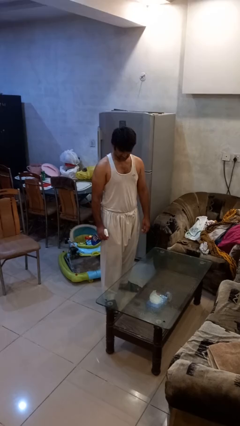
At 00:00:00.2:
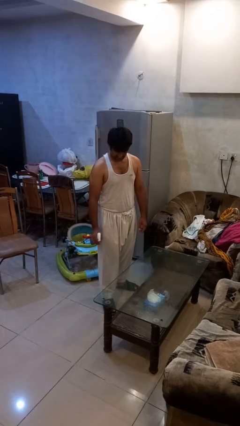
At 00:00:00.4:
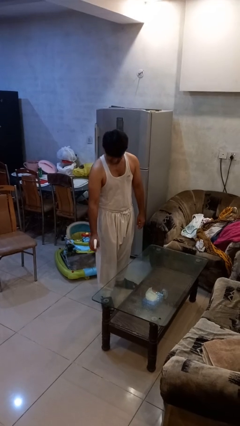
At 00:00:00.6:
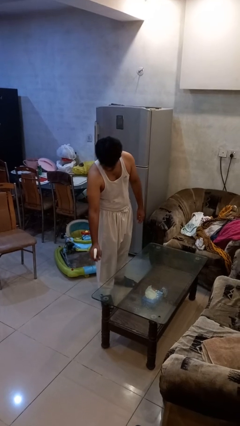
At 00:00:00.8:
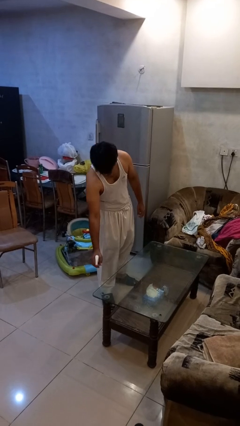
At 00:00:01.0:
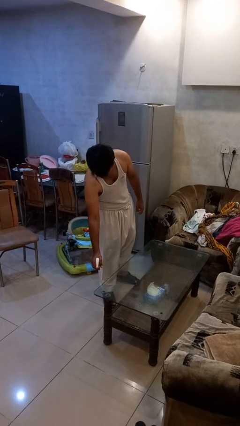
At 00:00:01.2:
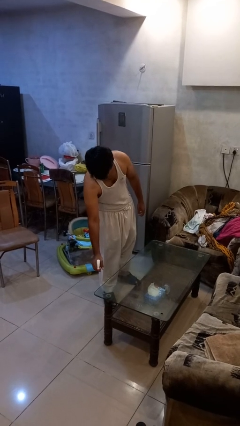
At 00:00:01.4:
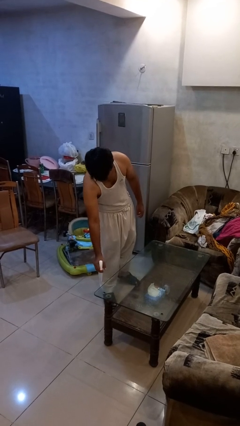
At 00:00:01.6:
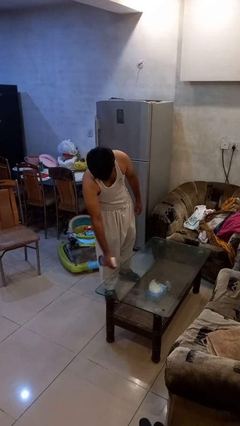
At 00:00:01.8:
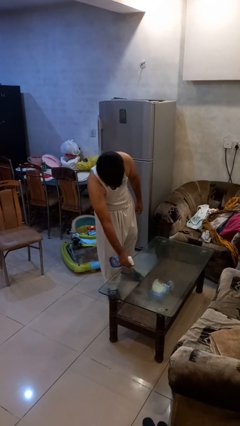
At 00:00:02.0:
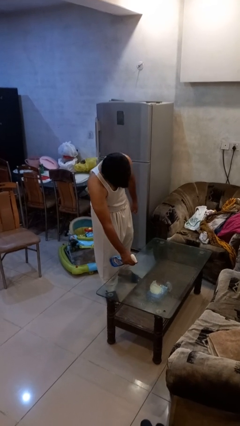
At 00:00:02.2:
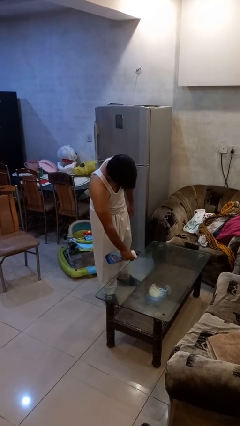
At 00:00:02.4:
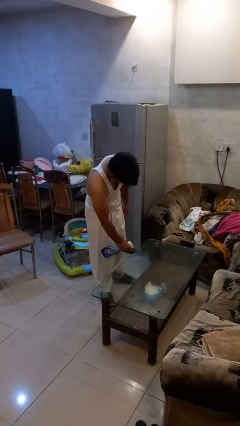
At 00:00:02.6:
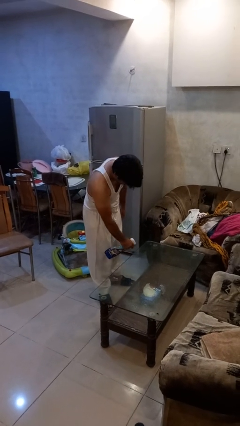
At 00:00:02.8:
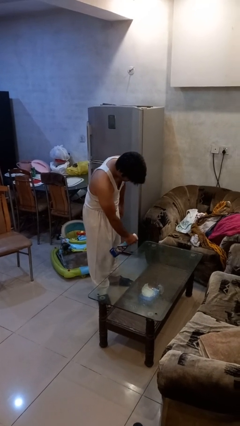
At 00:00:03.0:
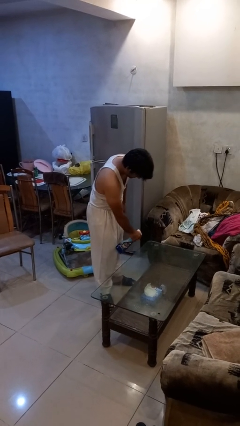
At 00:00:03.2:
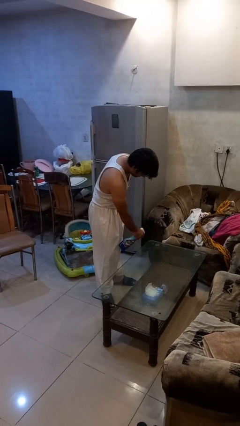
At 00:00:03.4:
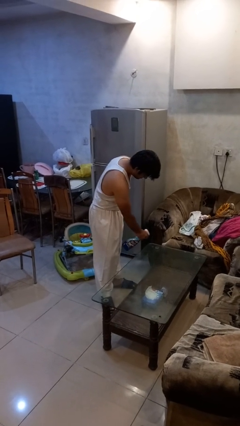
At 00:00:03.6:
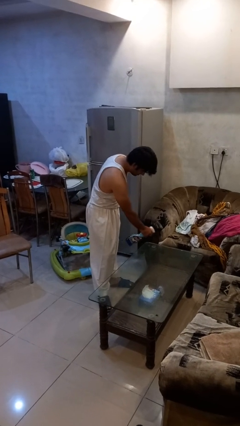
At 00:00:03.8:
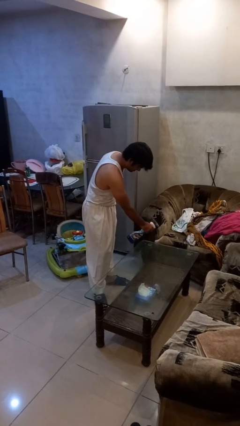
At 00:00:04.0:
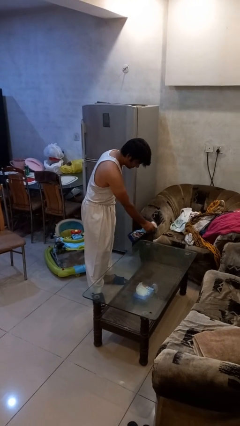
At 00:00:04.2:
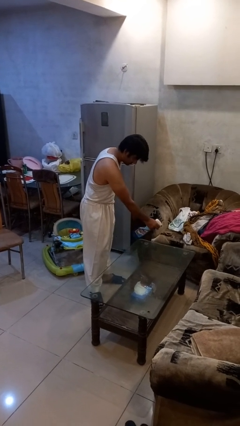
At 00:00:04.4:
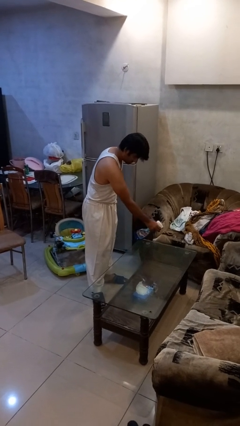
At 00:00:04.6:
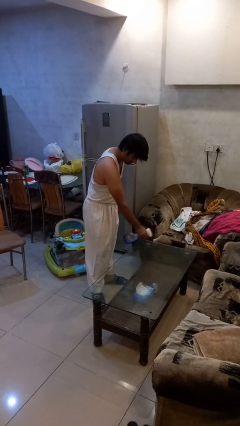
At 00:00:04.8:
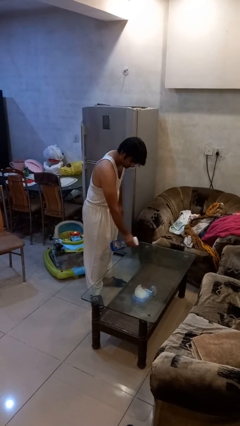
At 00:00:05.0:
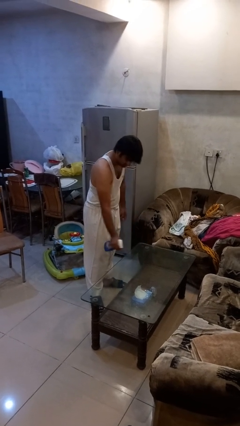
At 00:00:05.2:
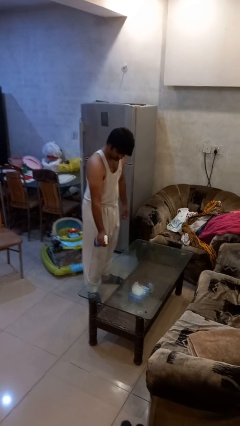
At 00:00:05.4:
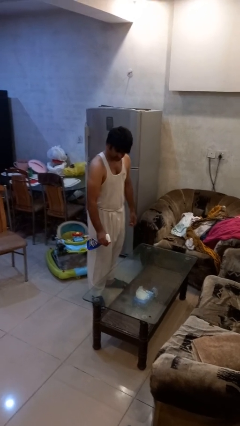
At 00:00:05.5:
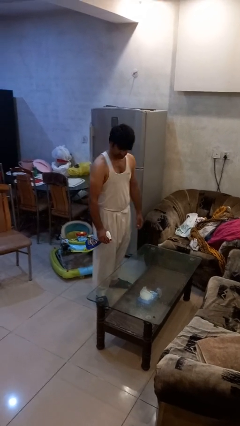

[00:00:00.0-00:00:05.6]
person sprays from bottle

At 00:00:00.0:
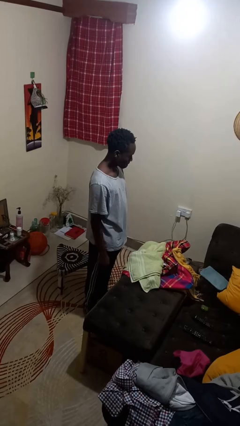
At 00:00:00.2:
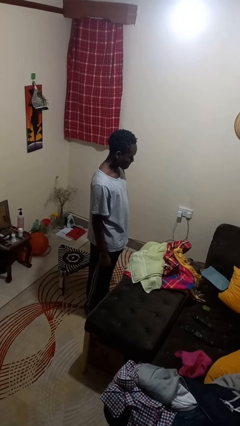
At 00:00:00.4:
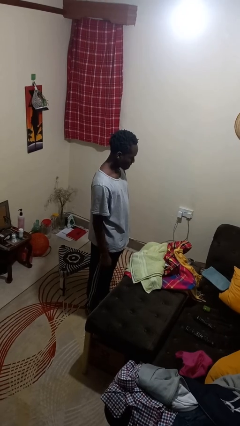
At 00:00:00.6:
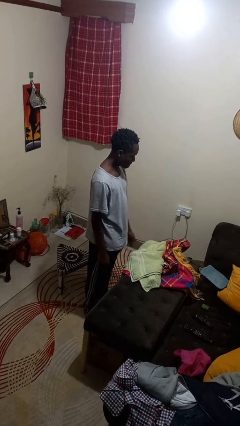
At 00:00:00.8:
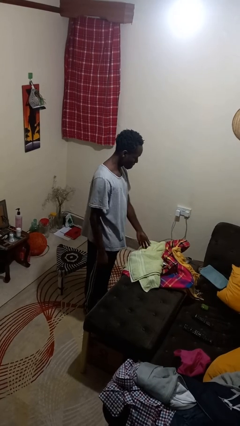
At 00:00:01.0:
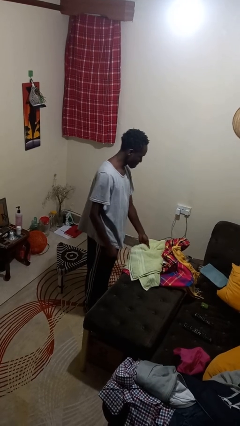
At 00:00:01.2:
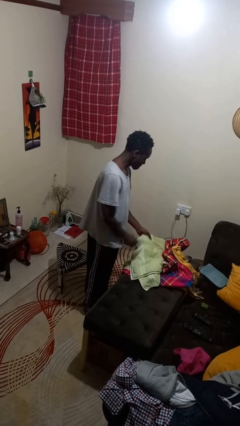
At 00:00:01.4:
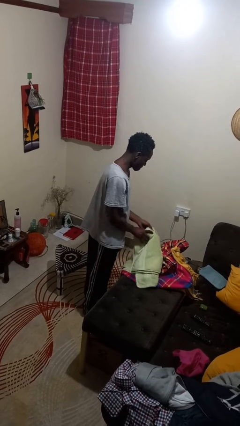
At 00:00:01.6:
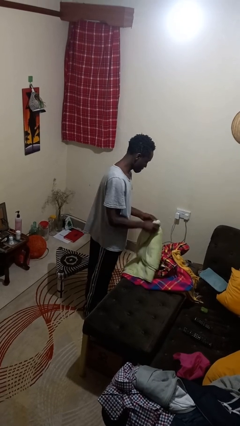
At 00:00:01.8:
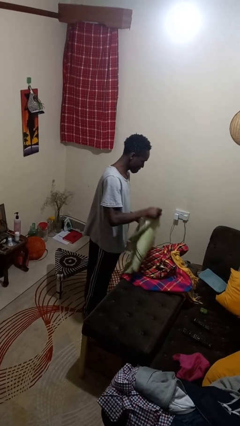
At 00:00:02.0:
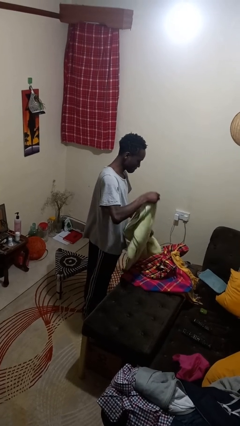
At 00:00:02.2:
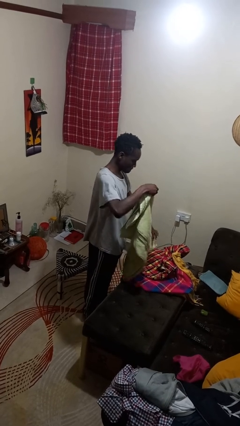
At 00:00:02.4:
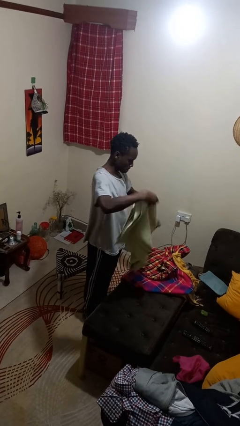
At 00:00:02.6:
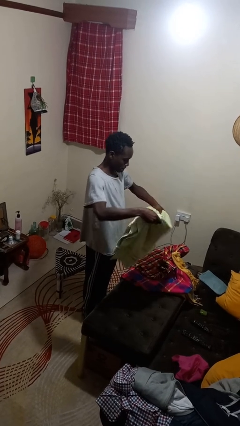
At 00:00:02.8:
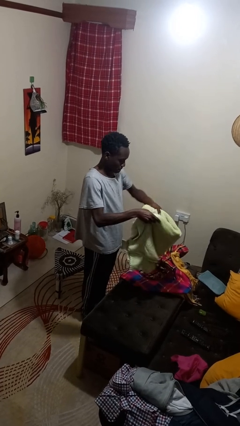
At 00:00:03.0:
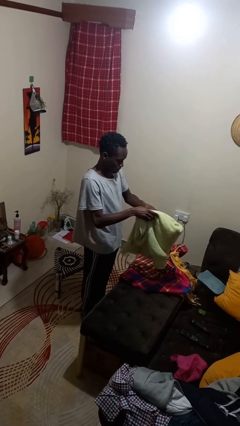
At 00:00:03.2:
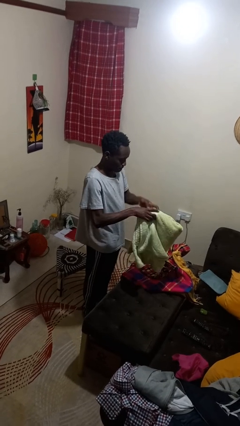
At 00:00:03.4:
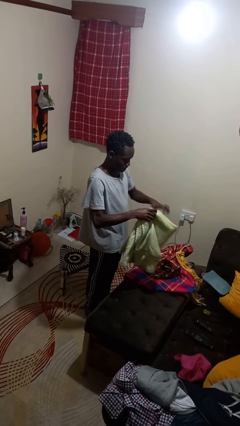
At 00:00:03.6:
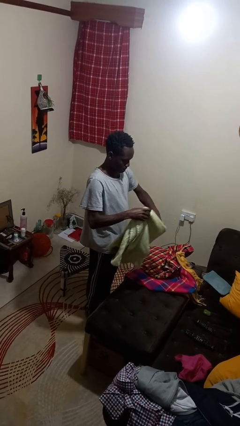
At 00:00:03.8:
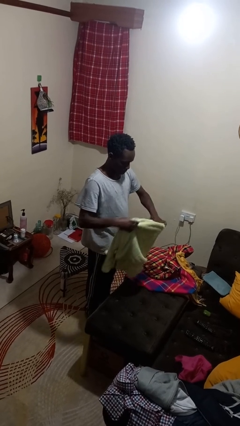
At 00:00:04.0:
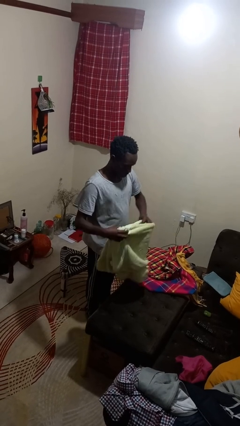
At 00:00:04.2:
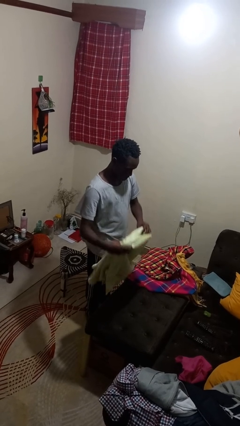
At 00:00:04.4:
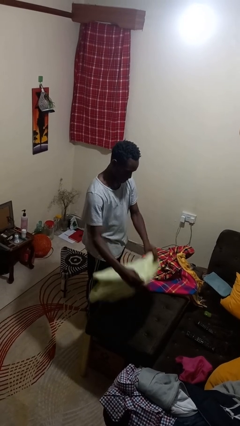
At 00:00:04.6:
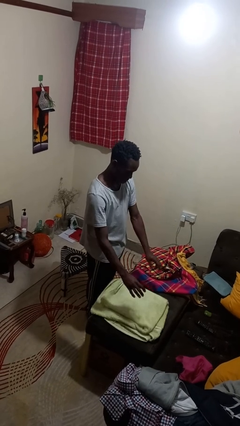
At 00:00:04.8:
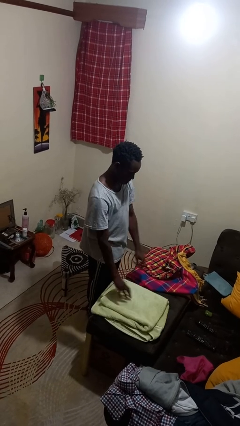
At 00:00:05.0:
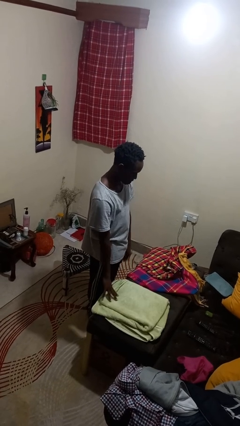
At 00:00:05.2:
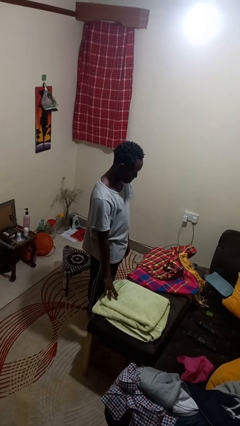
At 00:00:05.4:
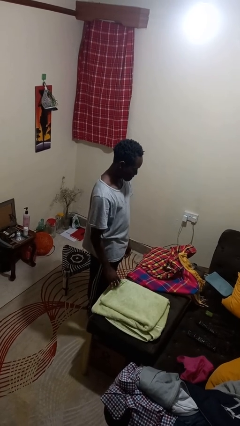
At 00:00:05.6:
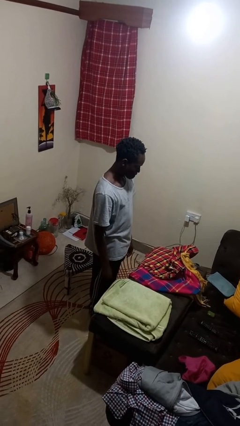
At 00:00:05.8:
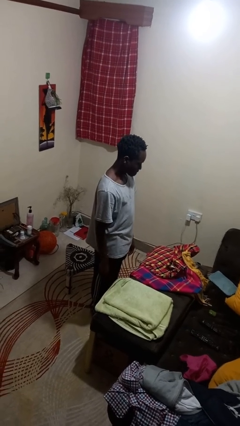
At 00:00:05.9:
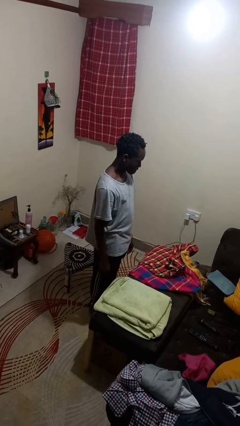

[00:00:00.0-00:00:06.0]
person folds towel

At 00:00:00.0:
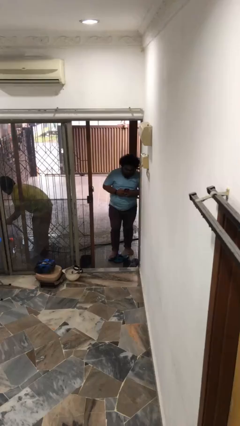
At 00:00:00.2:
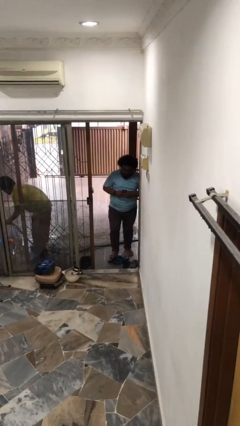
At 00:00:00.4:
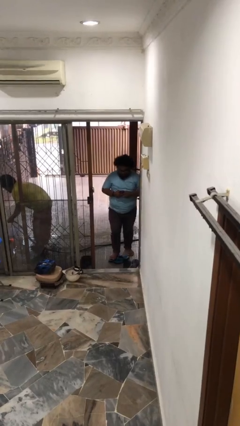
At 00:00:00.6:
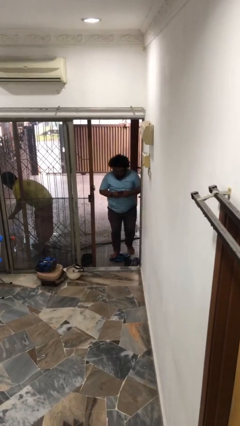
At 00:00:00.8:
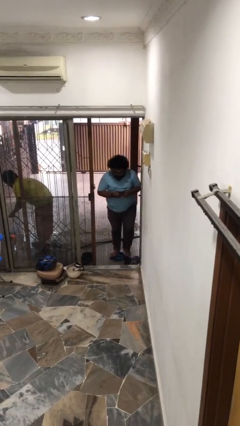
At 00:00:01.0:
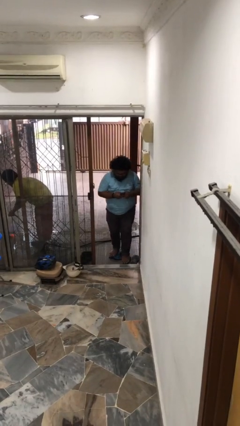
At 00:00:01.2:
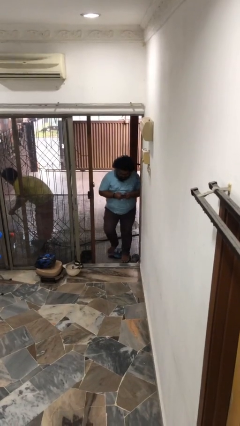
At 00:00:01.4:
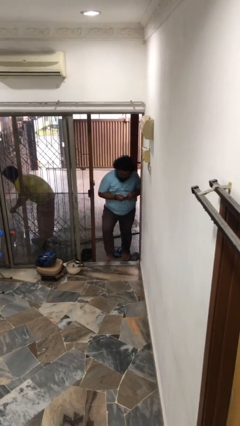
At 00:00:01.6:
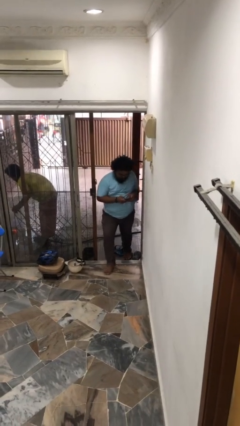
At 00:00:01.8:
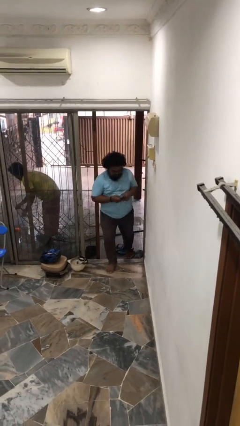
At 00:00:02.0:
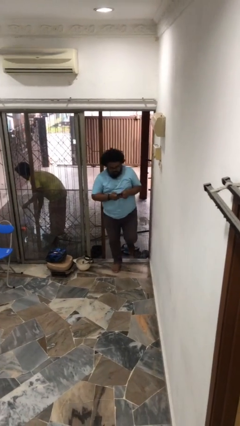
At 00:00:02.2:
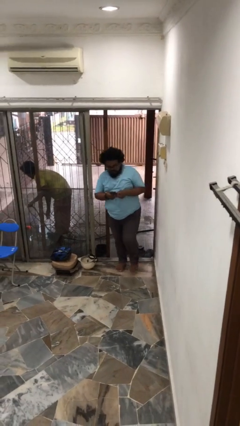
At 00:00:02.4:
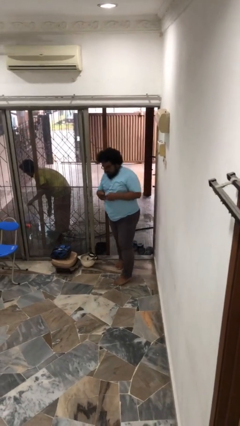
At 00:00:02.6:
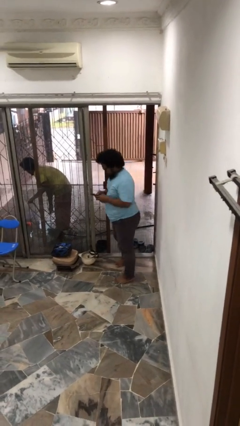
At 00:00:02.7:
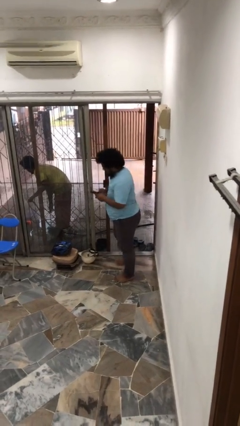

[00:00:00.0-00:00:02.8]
person enters scene through structure

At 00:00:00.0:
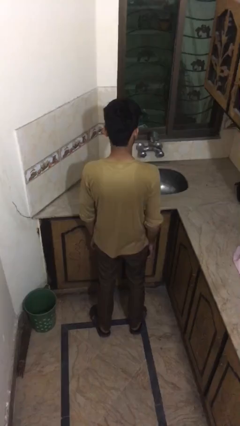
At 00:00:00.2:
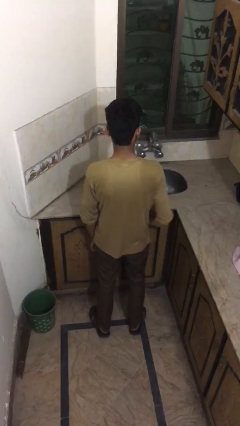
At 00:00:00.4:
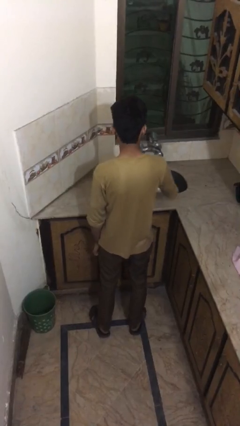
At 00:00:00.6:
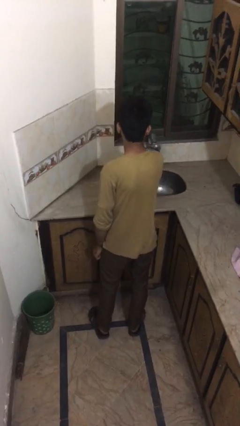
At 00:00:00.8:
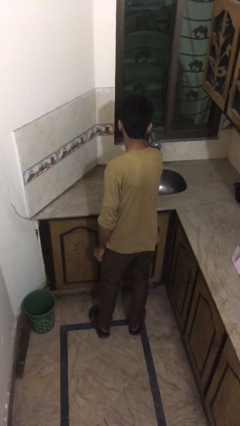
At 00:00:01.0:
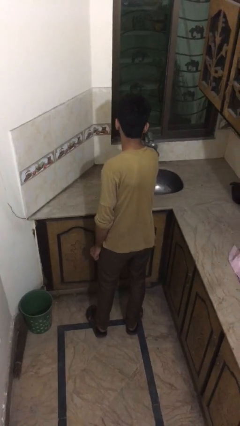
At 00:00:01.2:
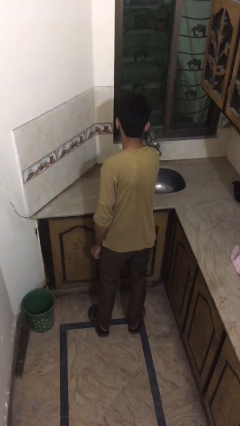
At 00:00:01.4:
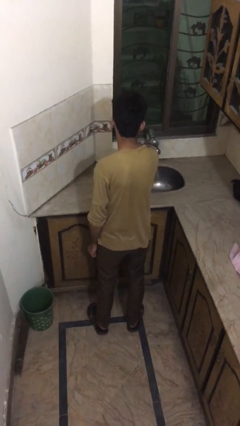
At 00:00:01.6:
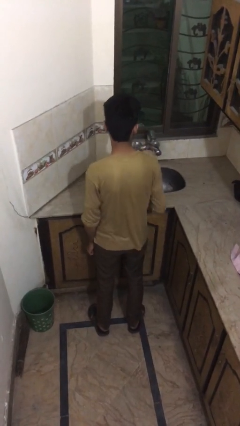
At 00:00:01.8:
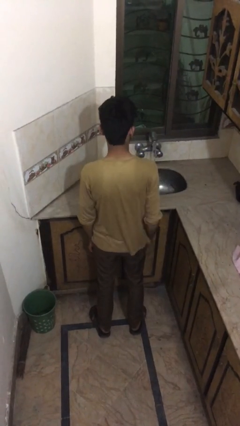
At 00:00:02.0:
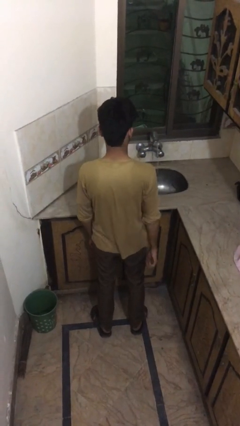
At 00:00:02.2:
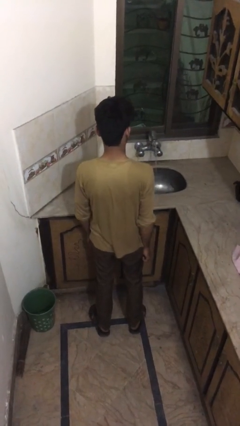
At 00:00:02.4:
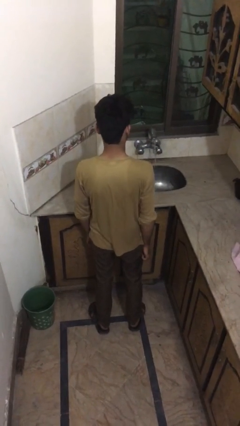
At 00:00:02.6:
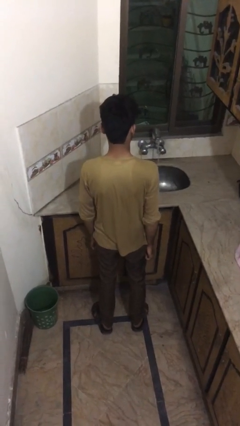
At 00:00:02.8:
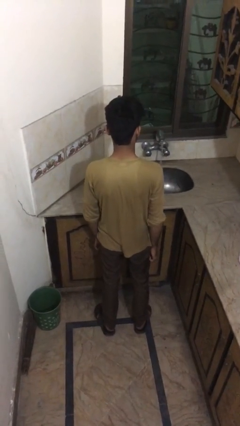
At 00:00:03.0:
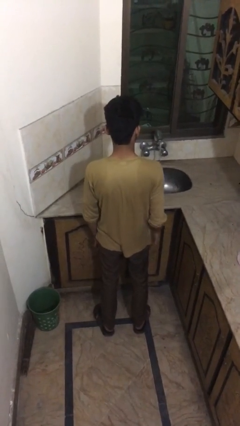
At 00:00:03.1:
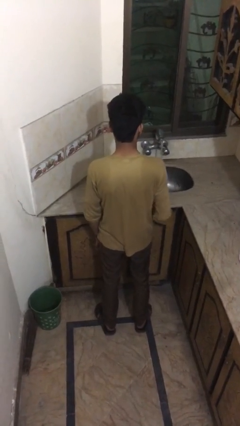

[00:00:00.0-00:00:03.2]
person turns on faucet
